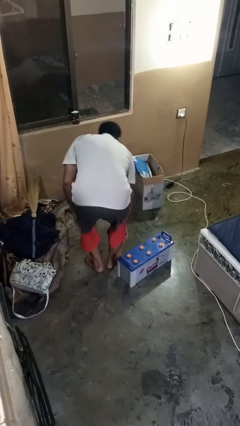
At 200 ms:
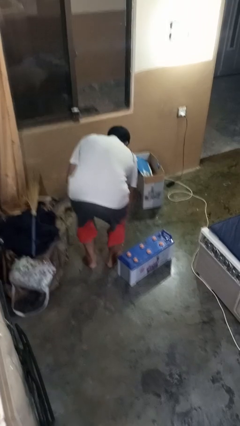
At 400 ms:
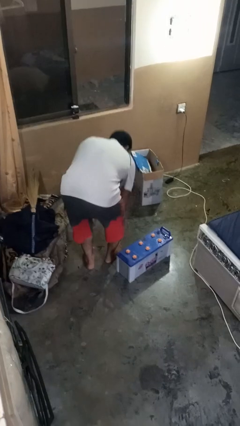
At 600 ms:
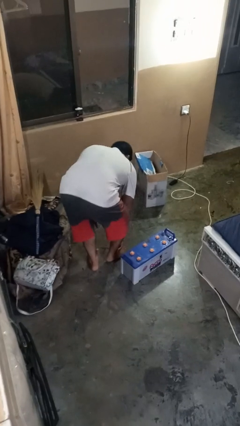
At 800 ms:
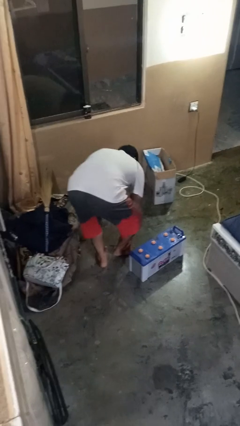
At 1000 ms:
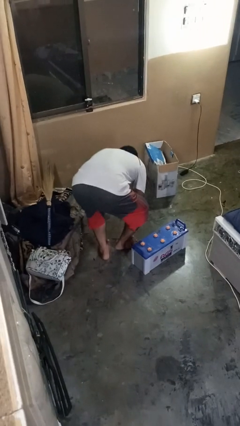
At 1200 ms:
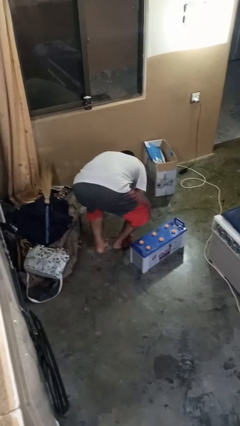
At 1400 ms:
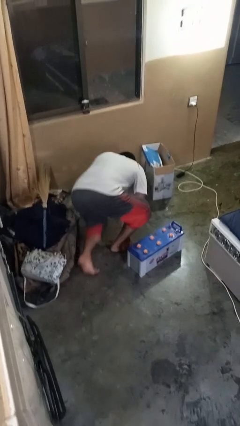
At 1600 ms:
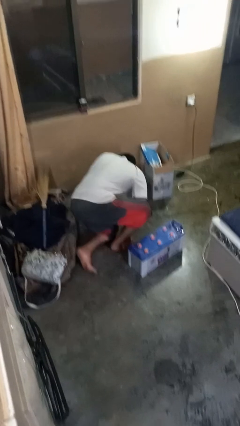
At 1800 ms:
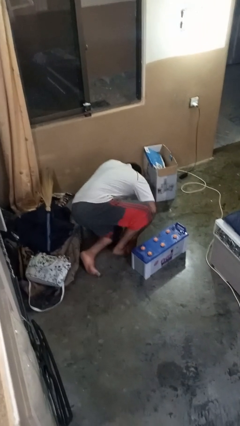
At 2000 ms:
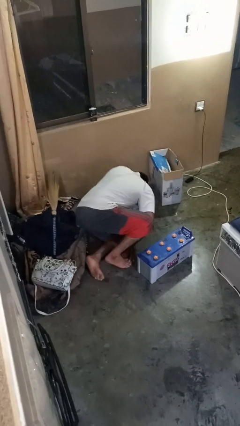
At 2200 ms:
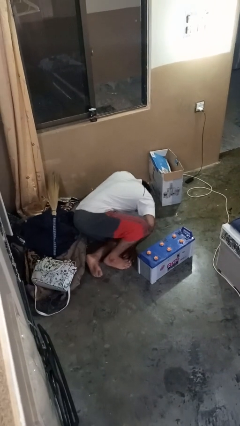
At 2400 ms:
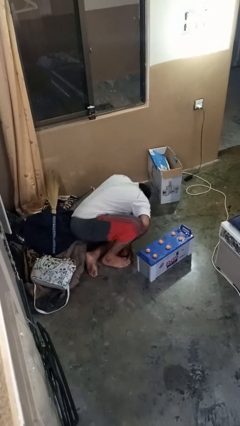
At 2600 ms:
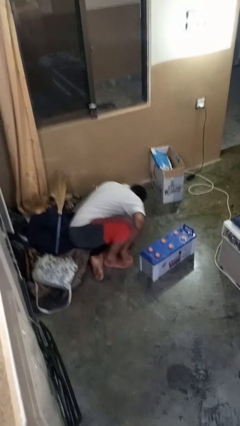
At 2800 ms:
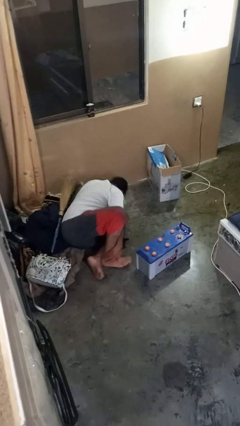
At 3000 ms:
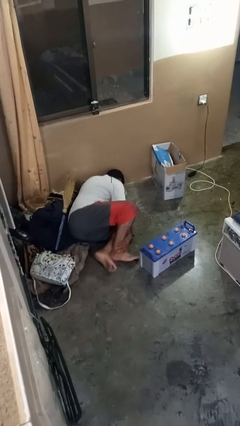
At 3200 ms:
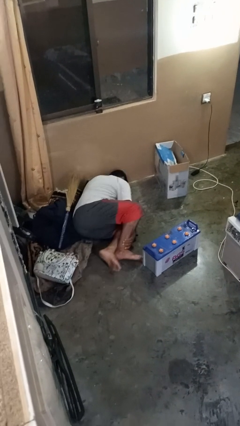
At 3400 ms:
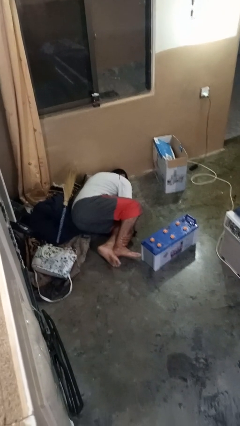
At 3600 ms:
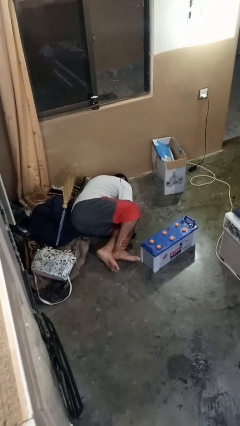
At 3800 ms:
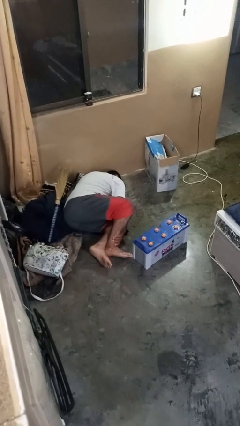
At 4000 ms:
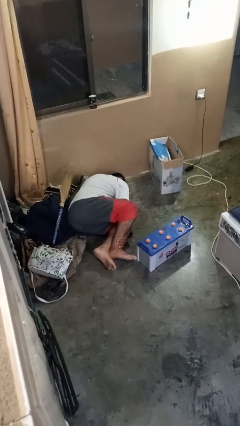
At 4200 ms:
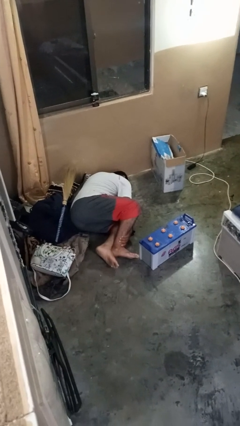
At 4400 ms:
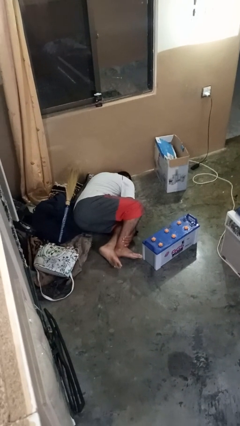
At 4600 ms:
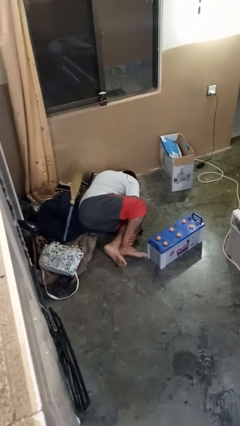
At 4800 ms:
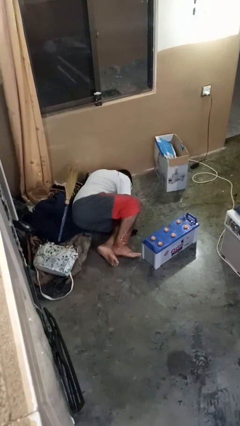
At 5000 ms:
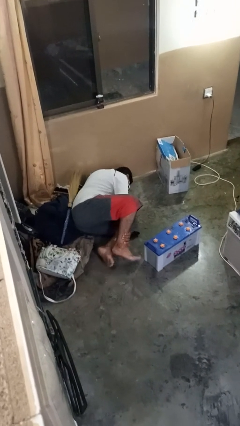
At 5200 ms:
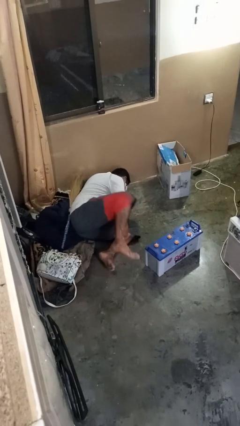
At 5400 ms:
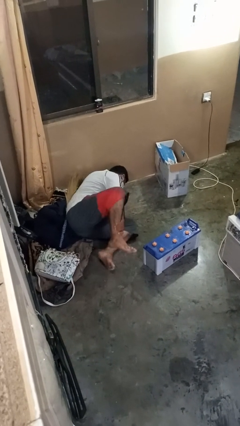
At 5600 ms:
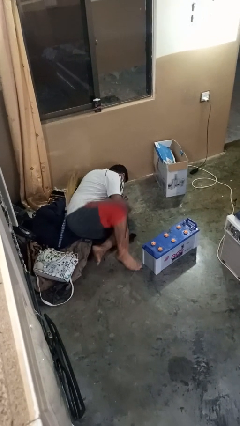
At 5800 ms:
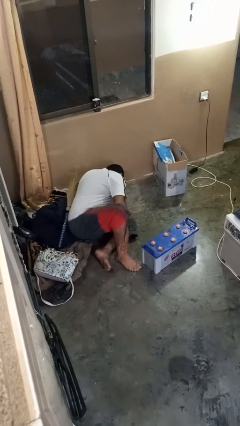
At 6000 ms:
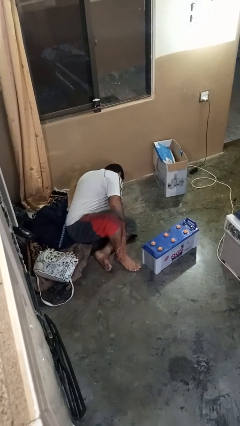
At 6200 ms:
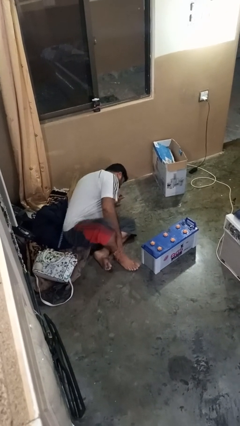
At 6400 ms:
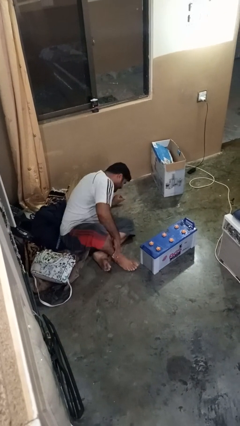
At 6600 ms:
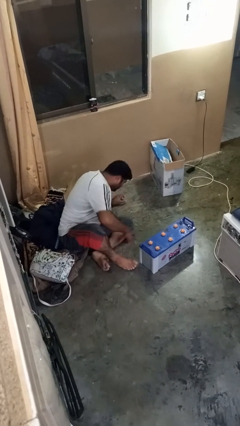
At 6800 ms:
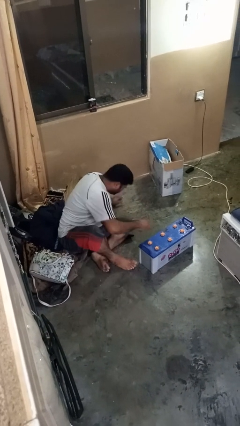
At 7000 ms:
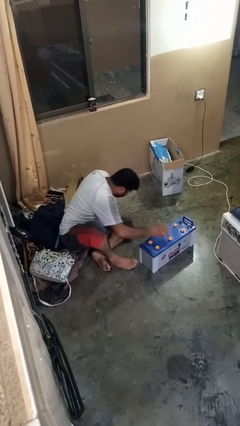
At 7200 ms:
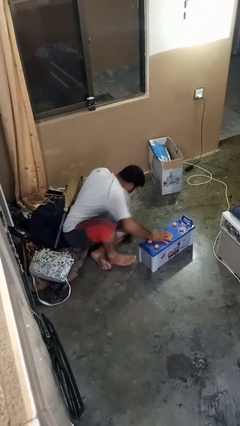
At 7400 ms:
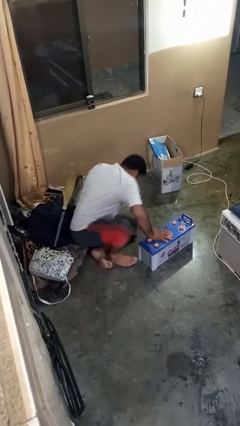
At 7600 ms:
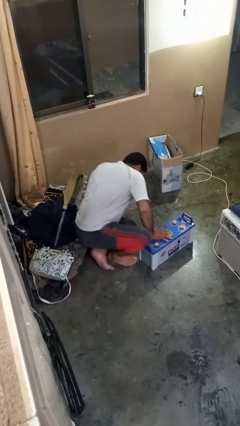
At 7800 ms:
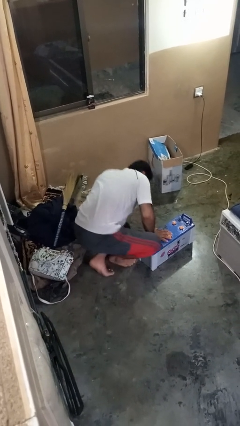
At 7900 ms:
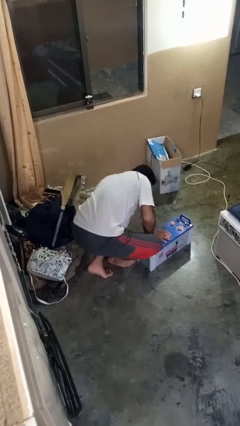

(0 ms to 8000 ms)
person lies down on floor

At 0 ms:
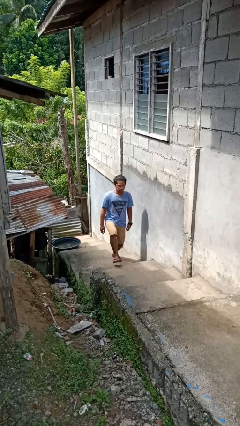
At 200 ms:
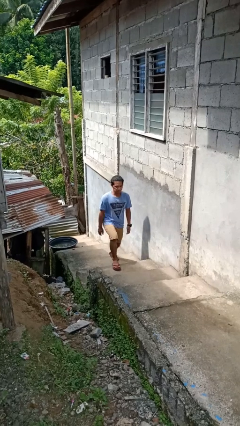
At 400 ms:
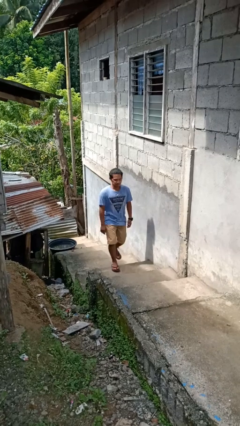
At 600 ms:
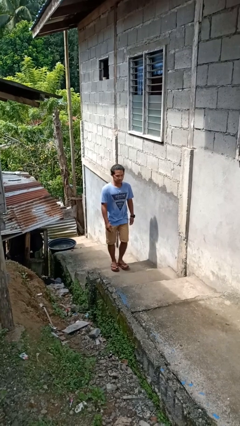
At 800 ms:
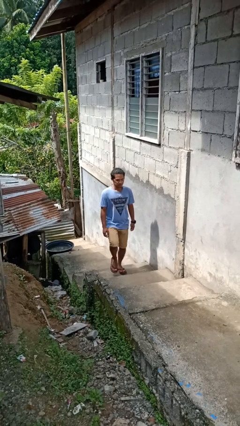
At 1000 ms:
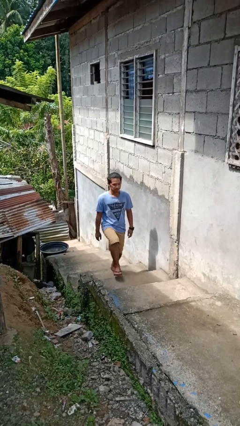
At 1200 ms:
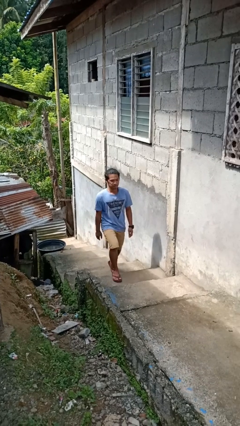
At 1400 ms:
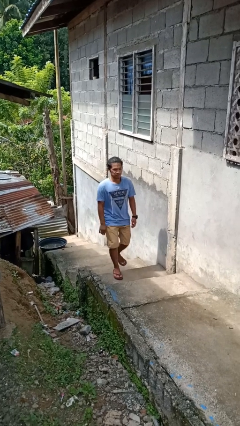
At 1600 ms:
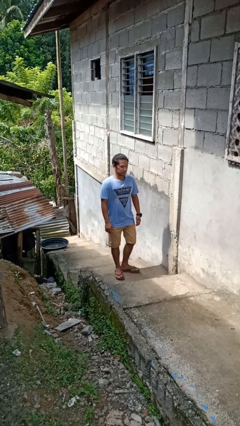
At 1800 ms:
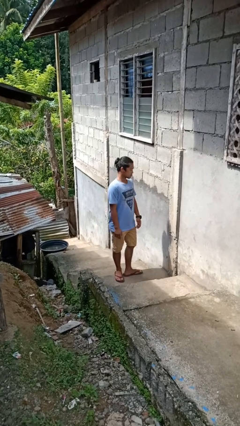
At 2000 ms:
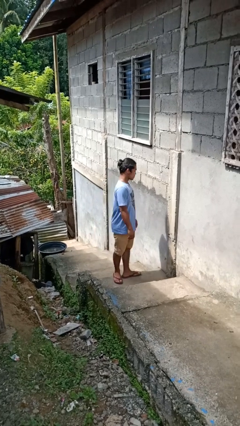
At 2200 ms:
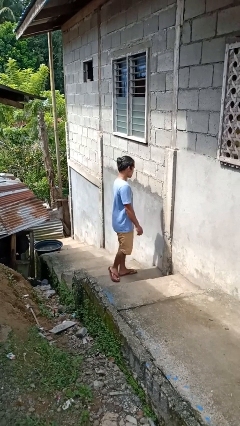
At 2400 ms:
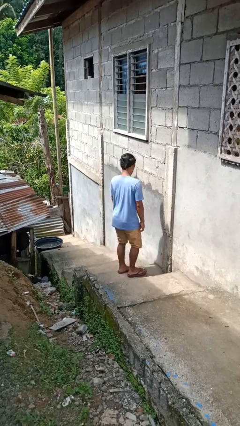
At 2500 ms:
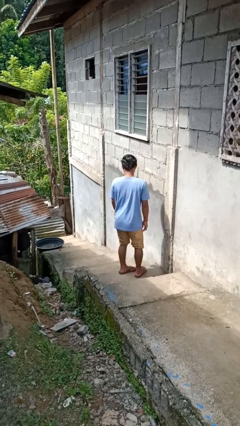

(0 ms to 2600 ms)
person climbs up stairs

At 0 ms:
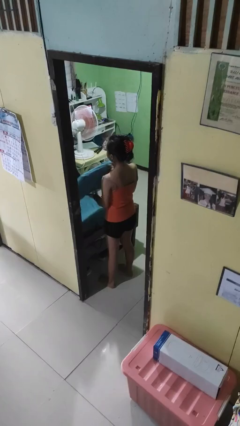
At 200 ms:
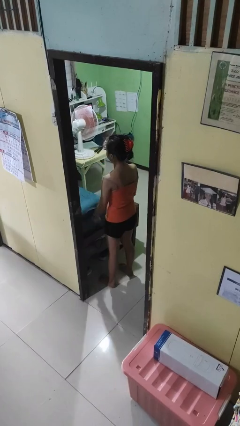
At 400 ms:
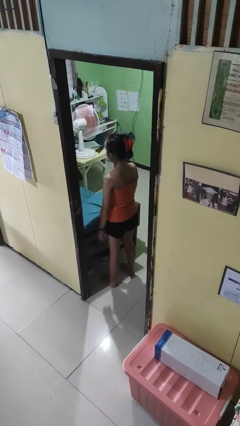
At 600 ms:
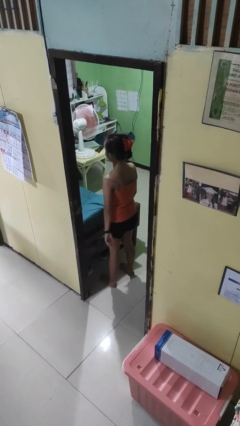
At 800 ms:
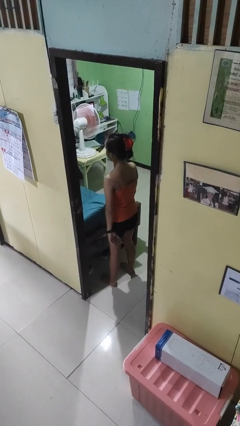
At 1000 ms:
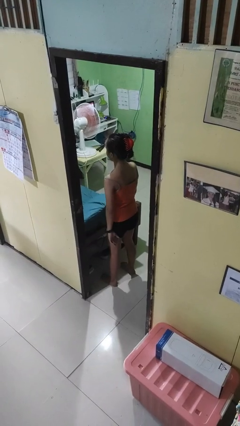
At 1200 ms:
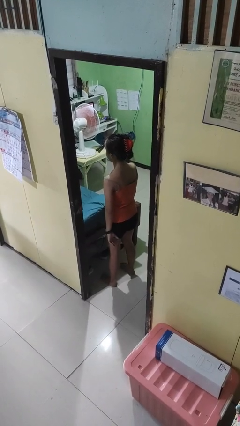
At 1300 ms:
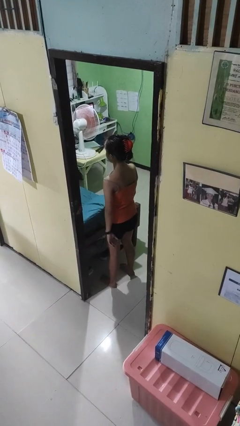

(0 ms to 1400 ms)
person puts down object on bed

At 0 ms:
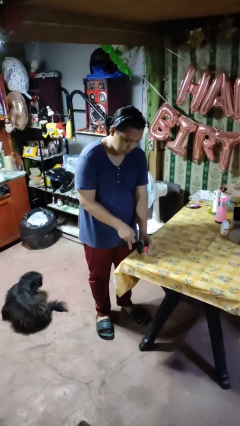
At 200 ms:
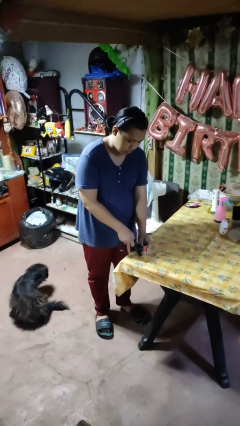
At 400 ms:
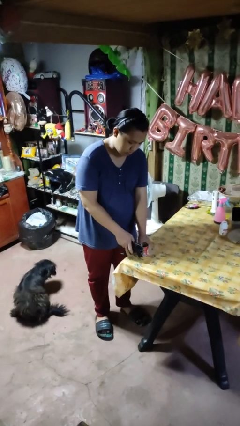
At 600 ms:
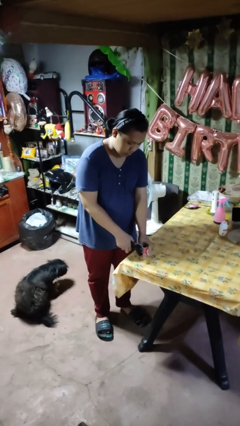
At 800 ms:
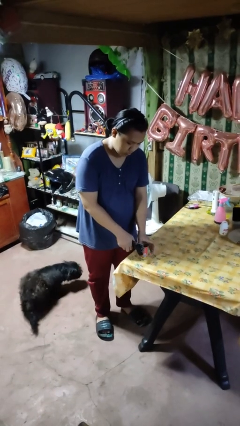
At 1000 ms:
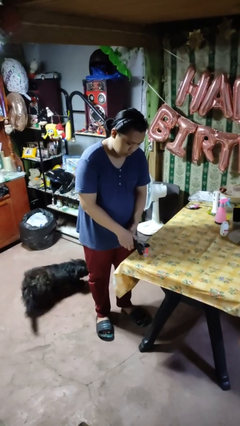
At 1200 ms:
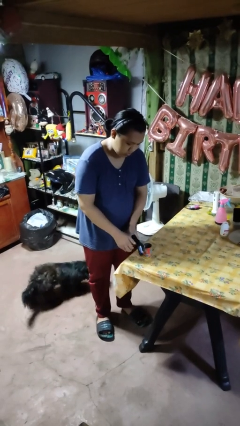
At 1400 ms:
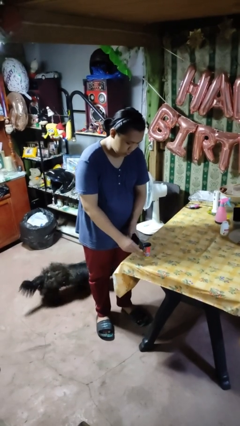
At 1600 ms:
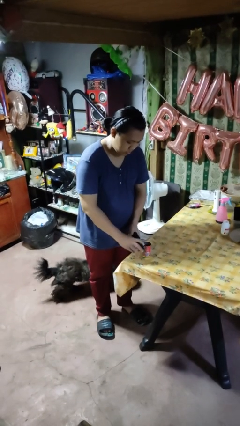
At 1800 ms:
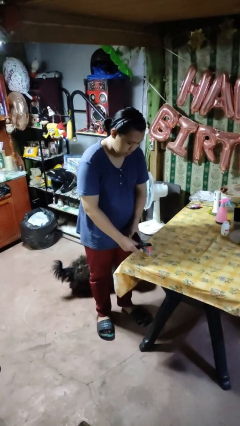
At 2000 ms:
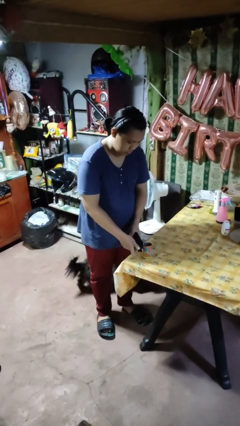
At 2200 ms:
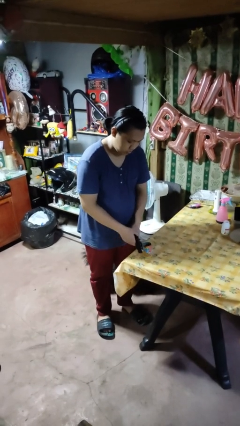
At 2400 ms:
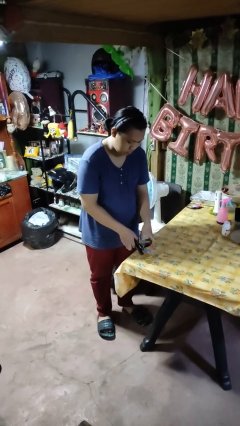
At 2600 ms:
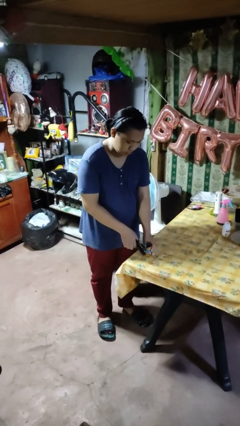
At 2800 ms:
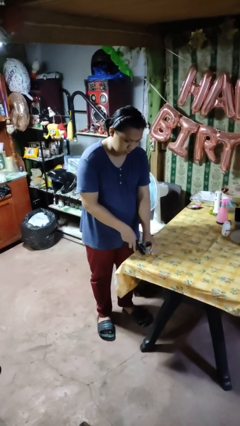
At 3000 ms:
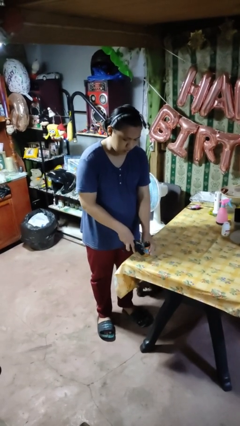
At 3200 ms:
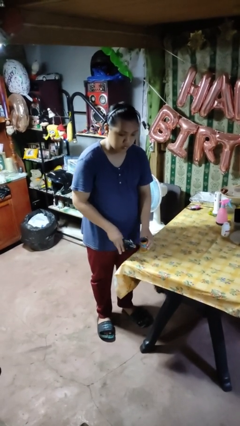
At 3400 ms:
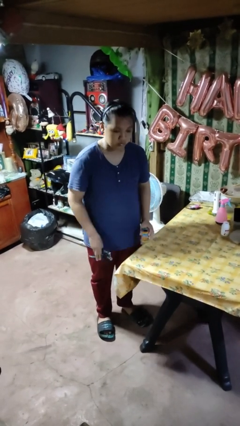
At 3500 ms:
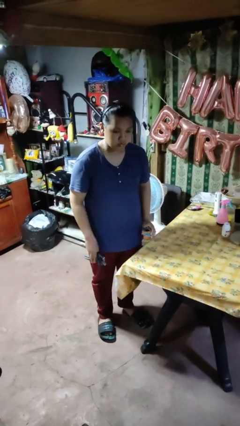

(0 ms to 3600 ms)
person opens can with can opener

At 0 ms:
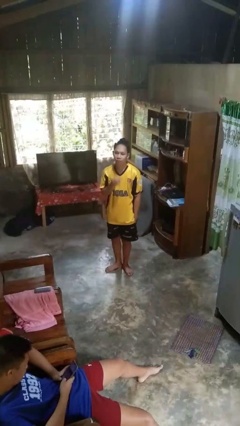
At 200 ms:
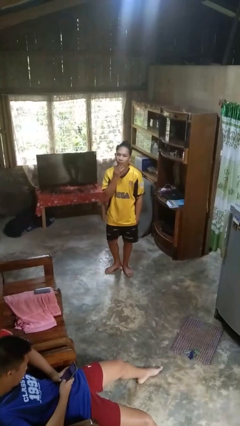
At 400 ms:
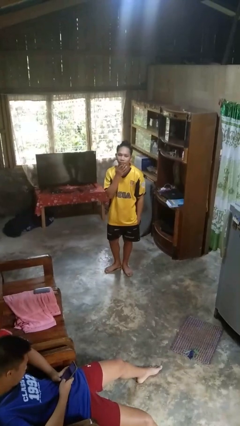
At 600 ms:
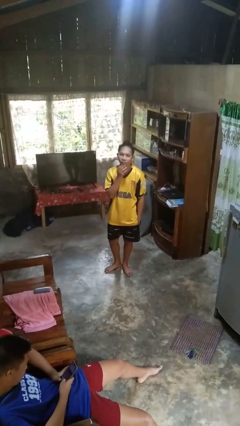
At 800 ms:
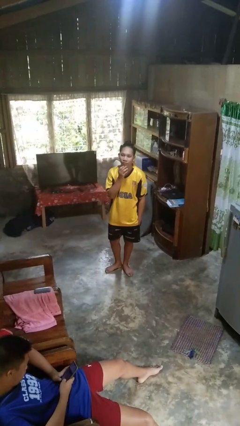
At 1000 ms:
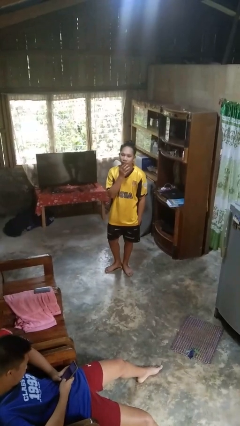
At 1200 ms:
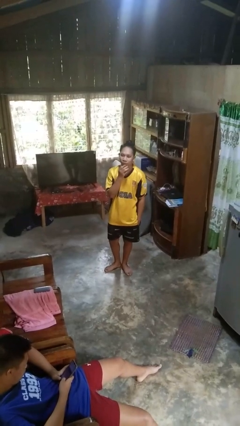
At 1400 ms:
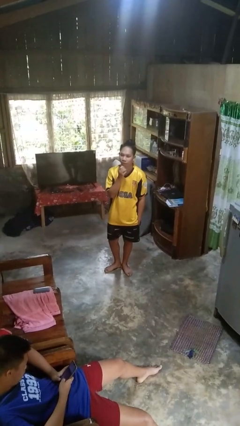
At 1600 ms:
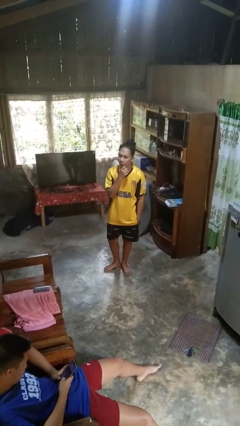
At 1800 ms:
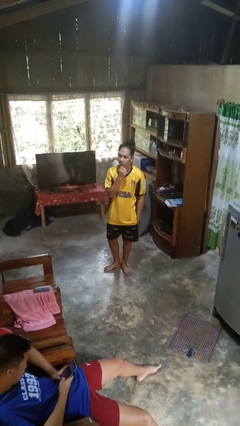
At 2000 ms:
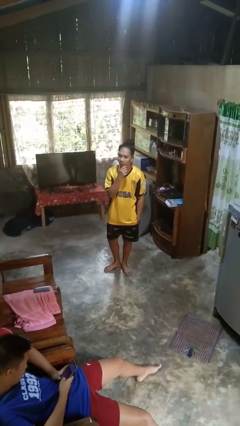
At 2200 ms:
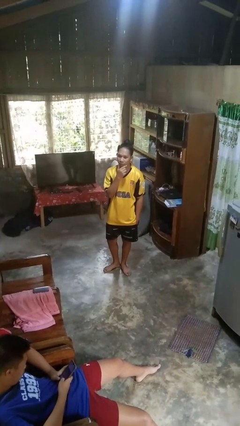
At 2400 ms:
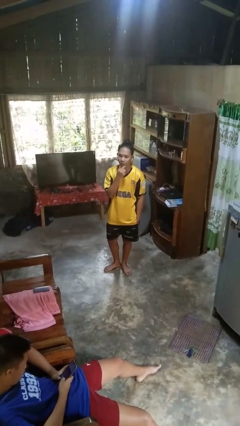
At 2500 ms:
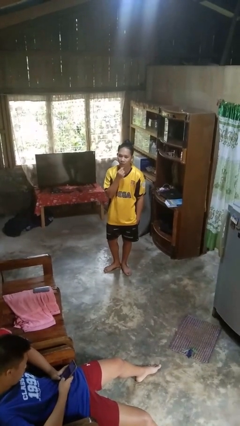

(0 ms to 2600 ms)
person strokes chin
